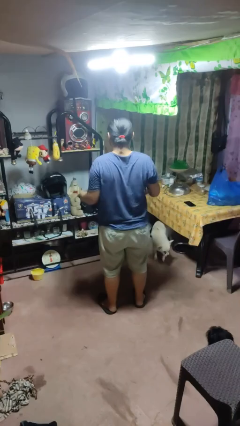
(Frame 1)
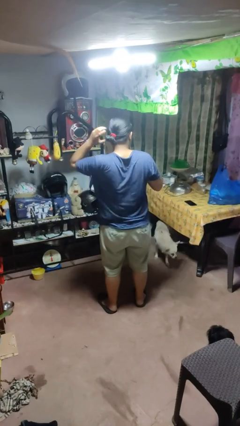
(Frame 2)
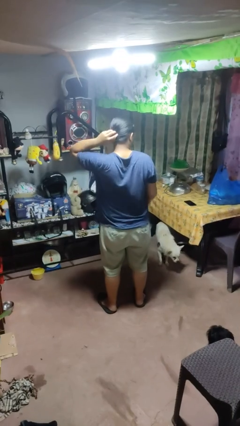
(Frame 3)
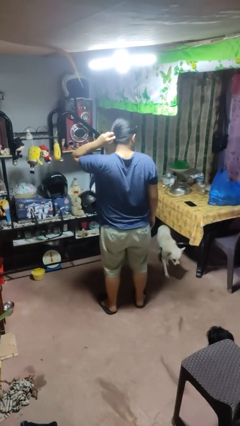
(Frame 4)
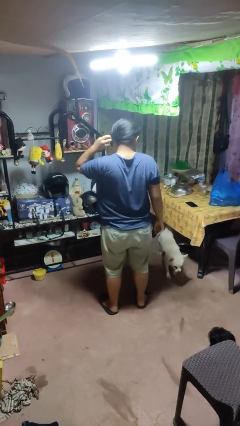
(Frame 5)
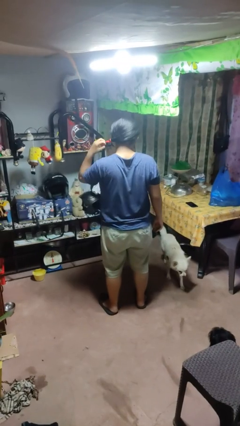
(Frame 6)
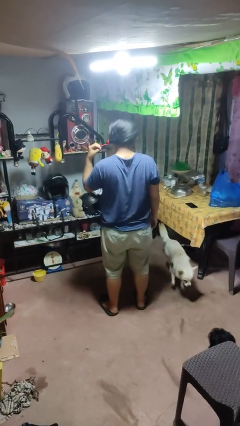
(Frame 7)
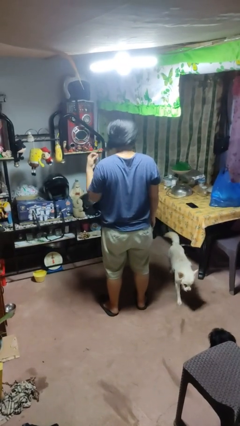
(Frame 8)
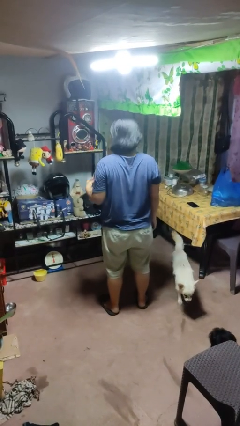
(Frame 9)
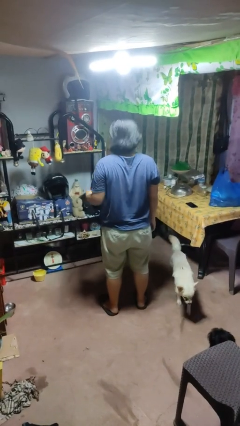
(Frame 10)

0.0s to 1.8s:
person takes off hairtie

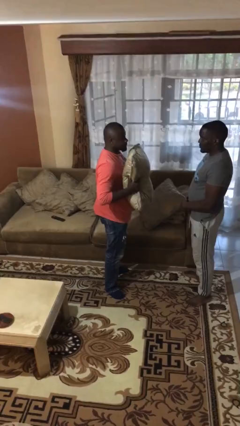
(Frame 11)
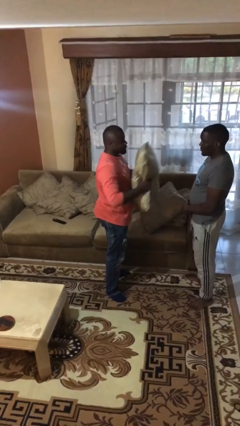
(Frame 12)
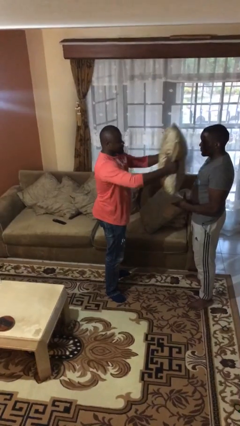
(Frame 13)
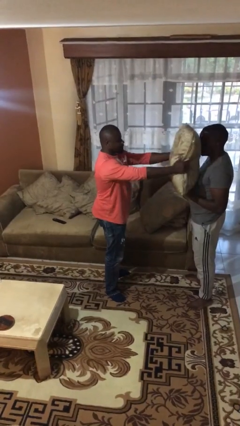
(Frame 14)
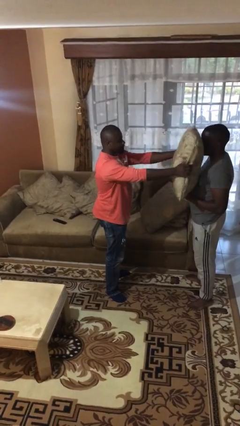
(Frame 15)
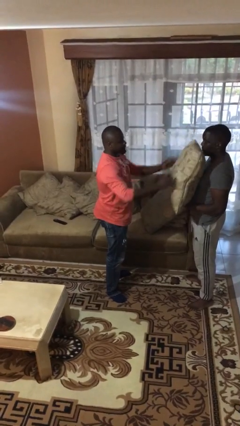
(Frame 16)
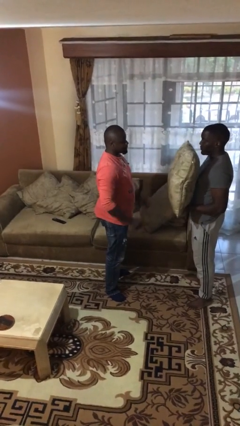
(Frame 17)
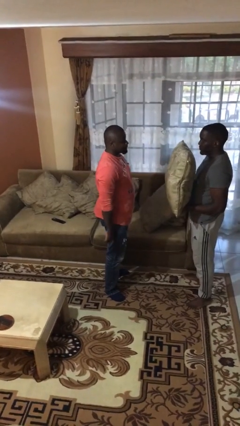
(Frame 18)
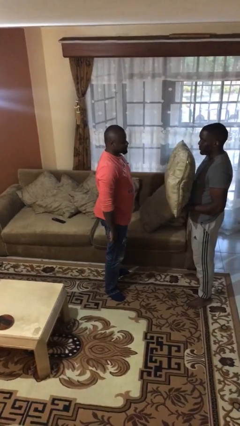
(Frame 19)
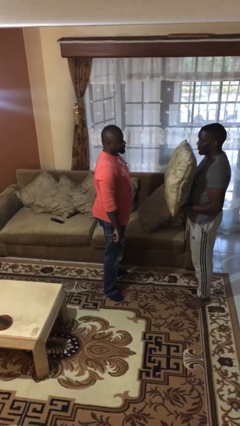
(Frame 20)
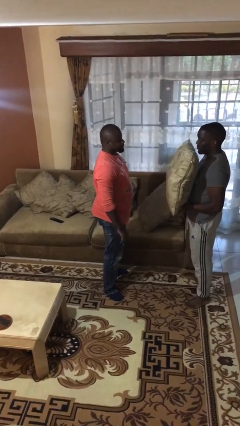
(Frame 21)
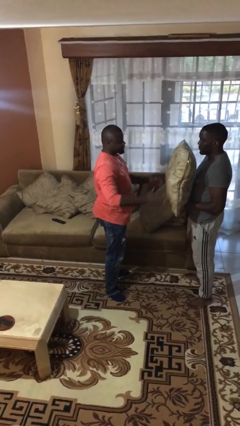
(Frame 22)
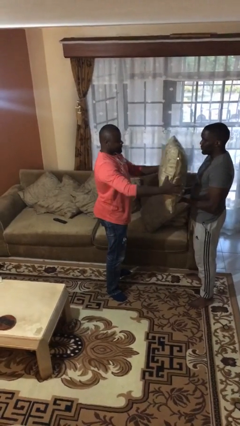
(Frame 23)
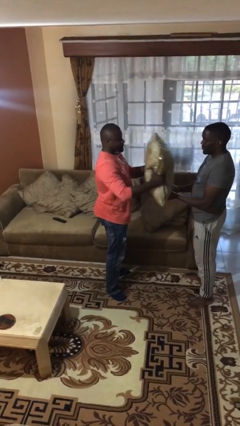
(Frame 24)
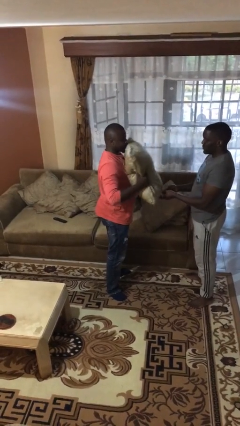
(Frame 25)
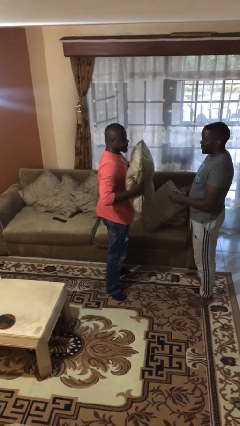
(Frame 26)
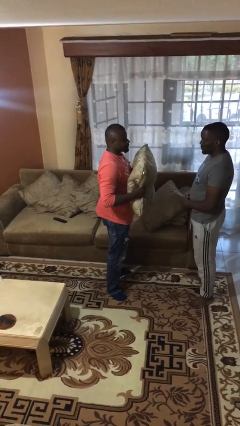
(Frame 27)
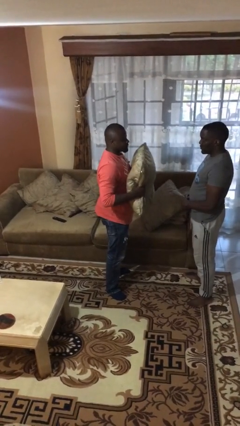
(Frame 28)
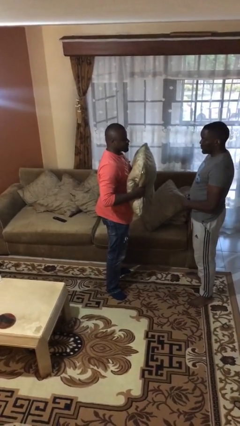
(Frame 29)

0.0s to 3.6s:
person transfers object to person

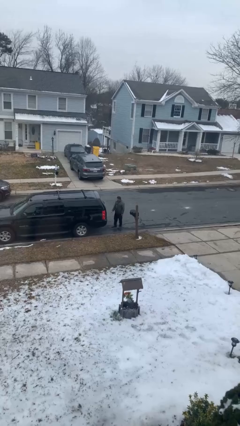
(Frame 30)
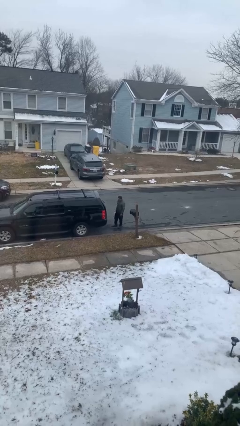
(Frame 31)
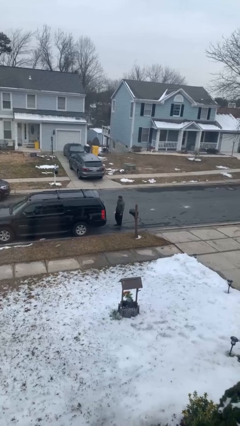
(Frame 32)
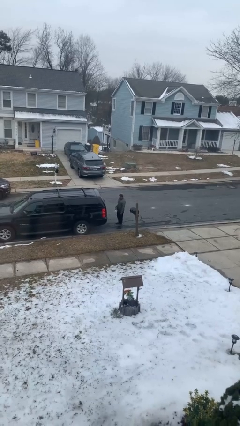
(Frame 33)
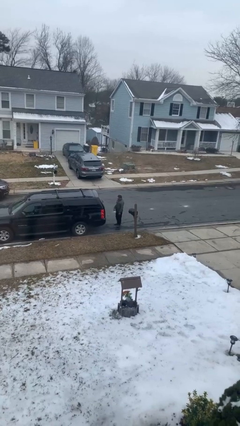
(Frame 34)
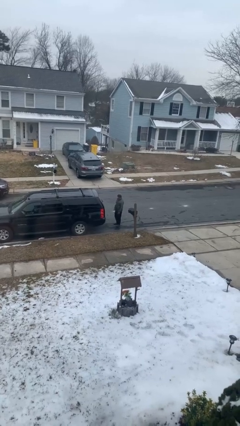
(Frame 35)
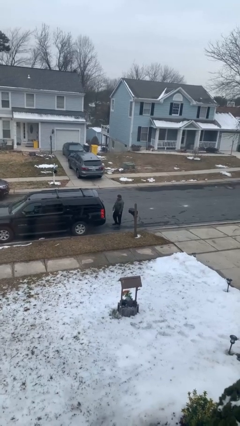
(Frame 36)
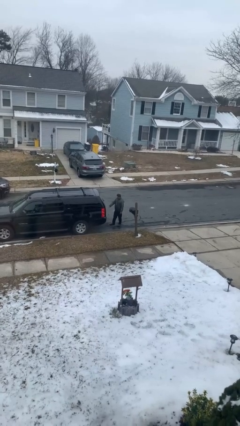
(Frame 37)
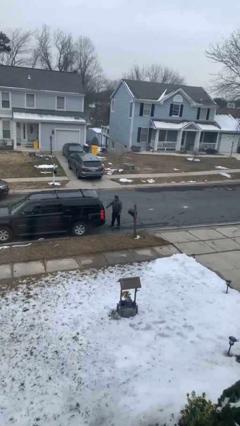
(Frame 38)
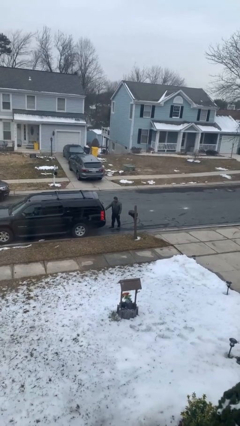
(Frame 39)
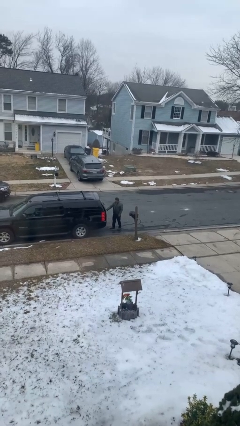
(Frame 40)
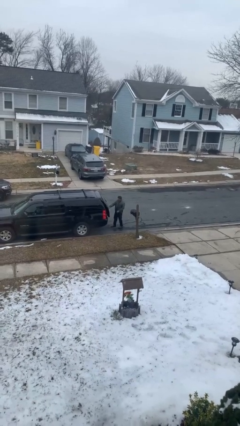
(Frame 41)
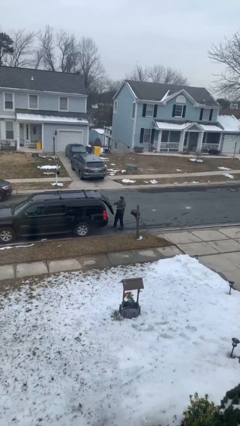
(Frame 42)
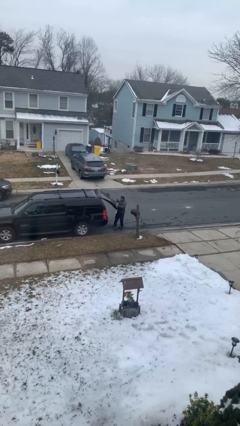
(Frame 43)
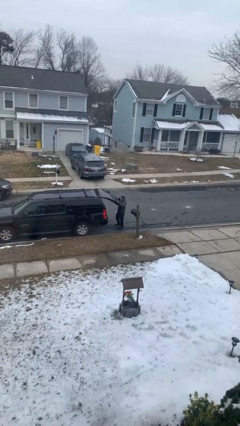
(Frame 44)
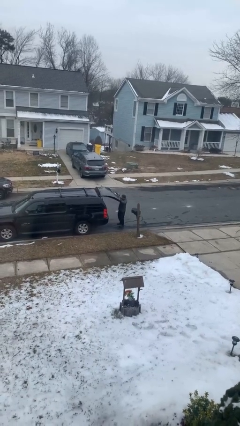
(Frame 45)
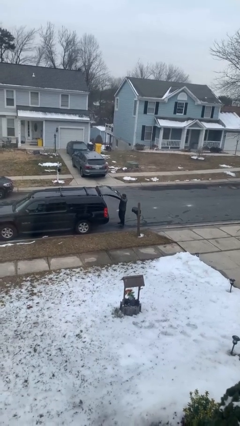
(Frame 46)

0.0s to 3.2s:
person opens car trunk

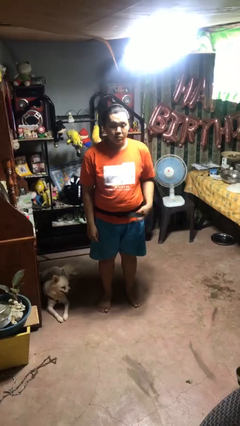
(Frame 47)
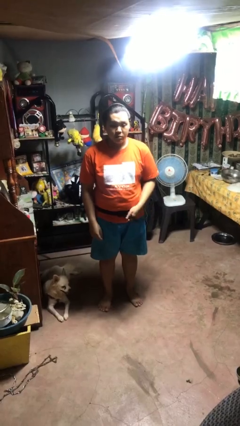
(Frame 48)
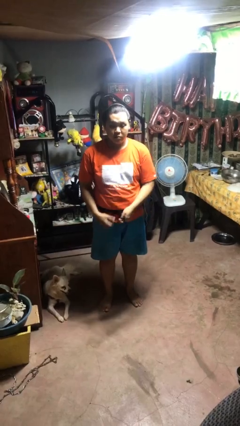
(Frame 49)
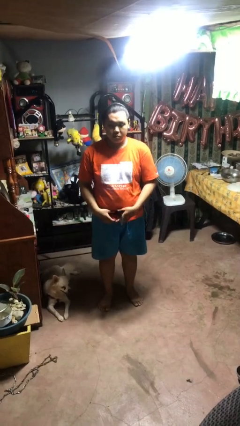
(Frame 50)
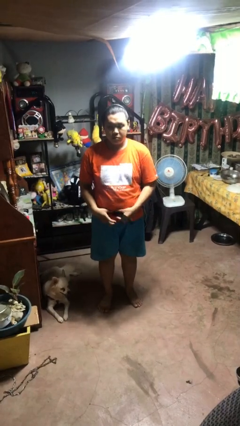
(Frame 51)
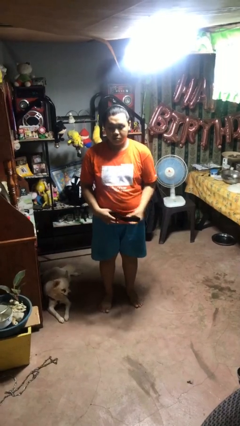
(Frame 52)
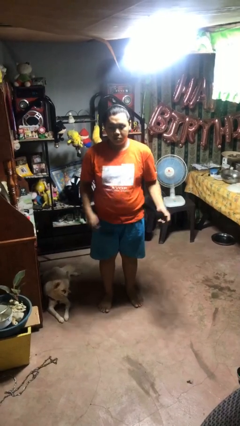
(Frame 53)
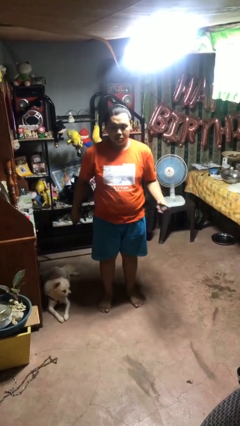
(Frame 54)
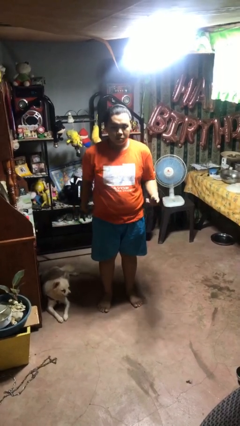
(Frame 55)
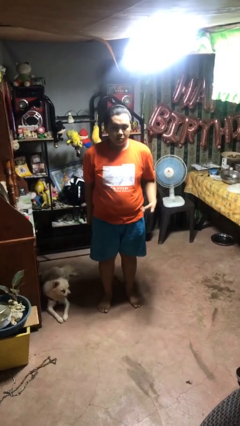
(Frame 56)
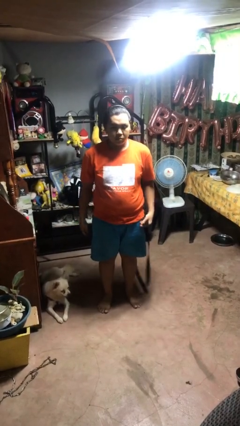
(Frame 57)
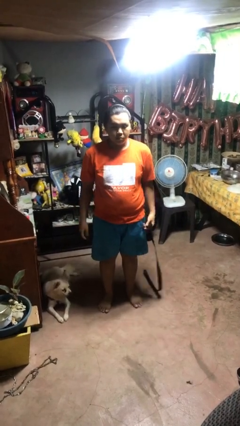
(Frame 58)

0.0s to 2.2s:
person takes off belt

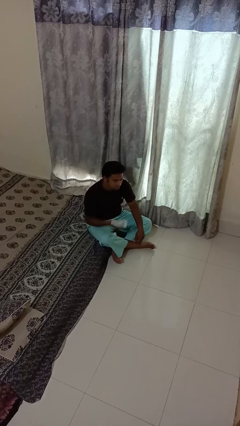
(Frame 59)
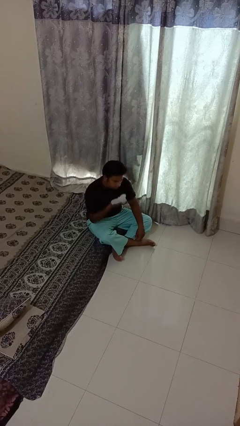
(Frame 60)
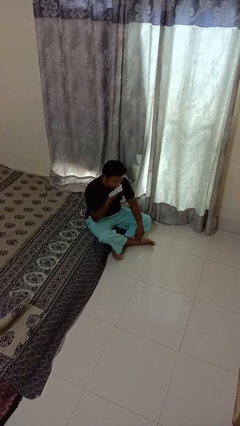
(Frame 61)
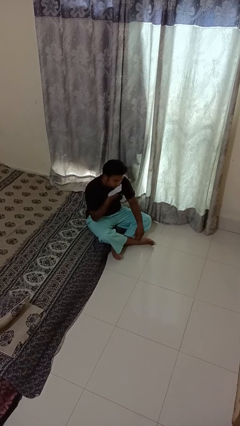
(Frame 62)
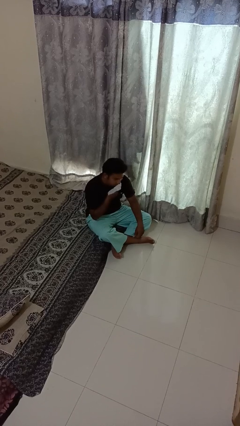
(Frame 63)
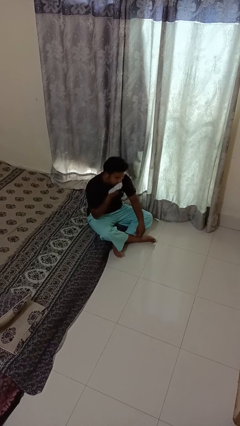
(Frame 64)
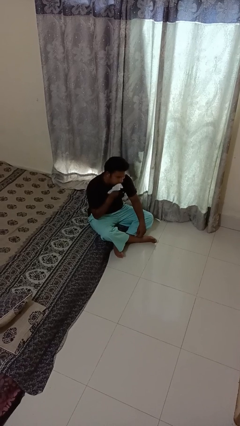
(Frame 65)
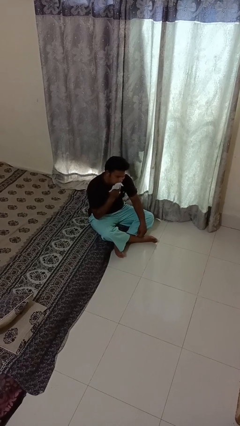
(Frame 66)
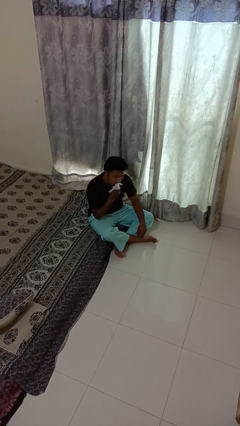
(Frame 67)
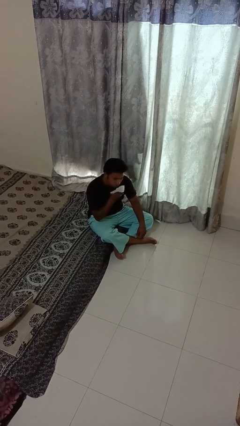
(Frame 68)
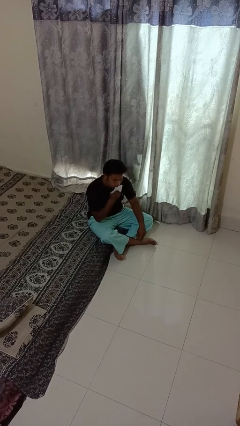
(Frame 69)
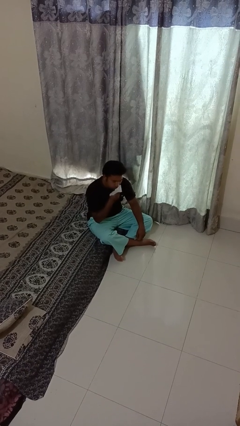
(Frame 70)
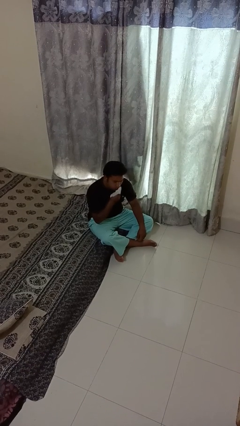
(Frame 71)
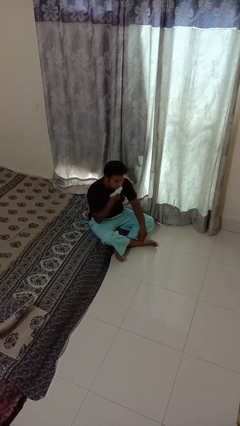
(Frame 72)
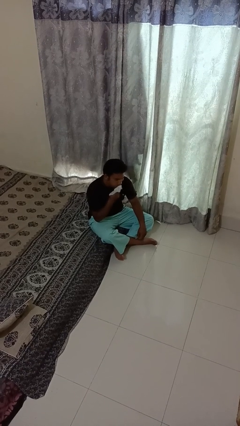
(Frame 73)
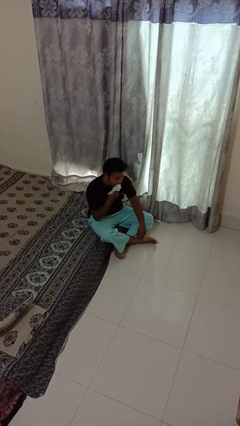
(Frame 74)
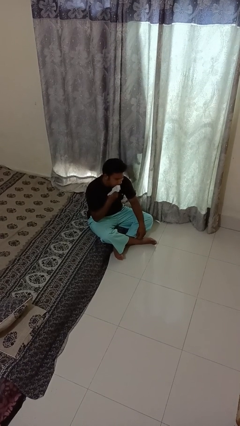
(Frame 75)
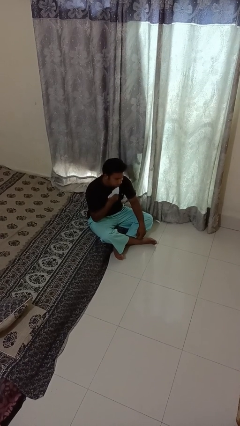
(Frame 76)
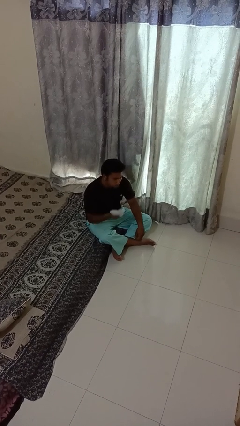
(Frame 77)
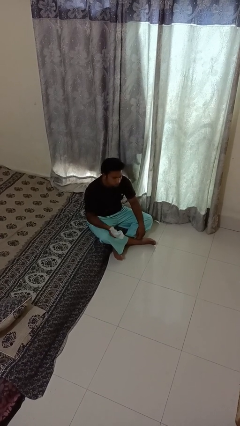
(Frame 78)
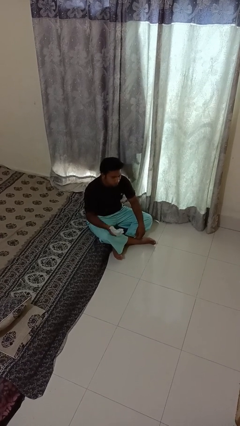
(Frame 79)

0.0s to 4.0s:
person wipes mouth with napkin

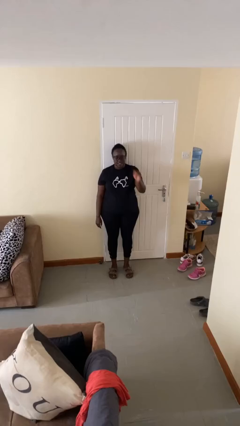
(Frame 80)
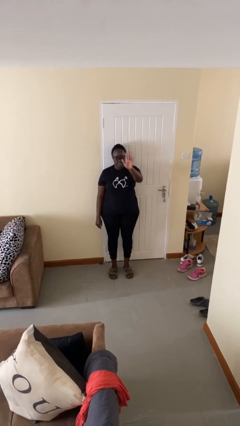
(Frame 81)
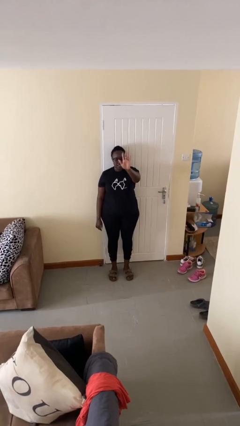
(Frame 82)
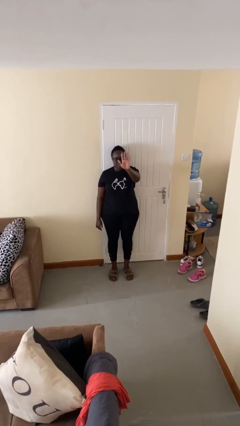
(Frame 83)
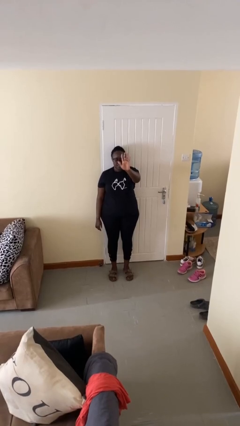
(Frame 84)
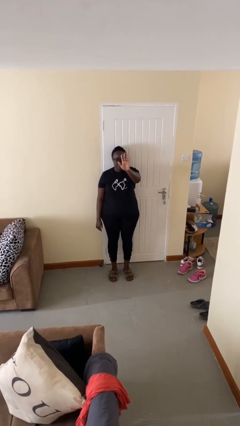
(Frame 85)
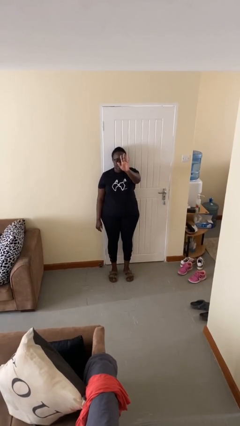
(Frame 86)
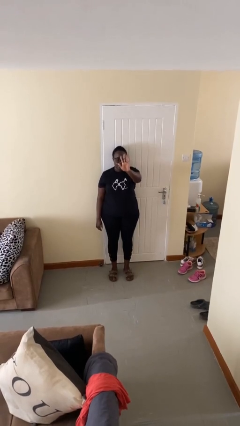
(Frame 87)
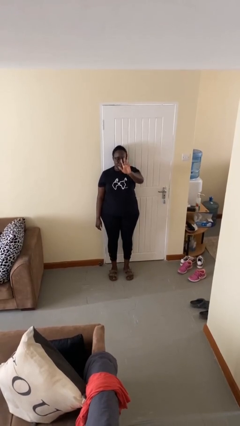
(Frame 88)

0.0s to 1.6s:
person gestures number five

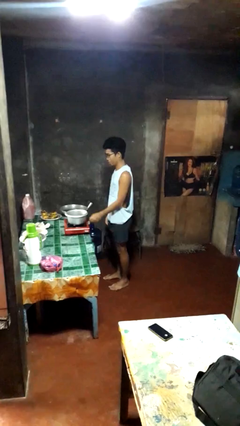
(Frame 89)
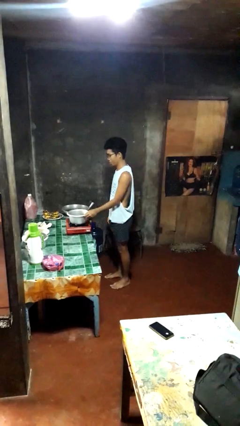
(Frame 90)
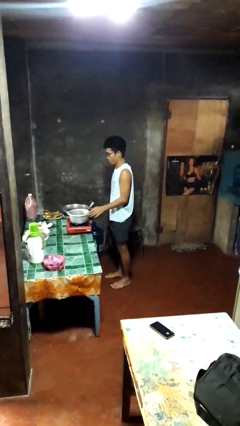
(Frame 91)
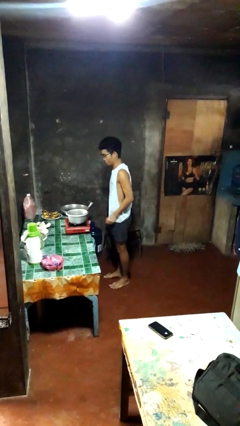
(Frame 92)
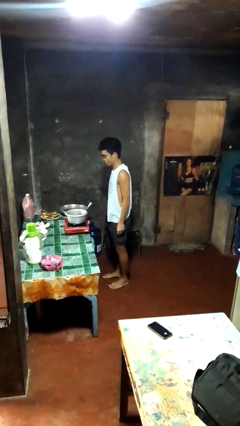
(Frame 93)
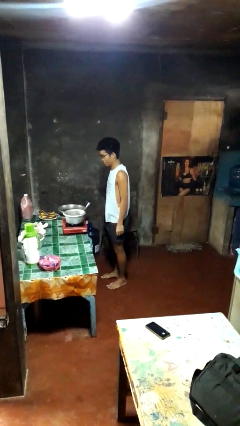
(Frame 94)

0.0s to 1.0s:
person burns hand
